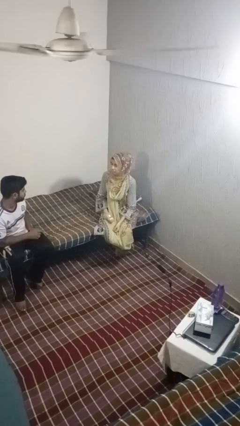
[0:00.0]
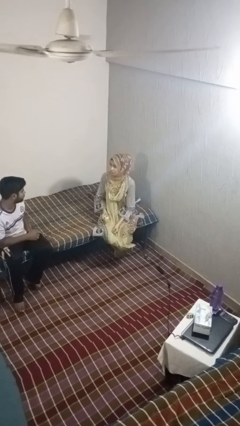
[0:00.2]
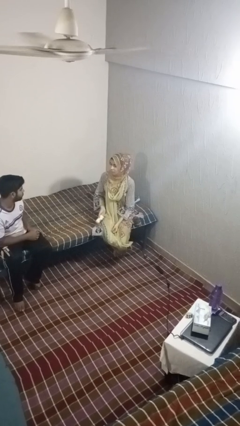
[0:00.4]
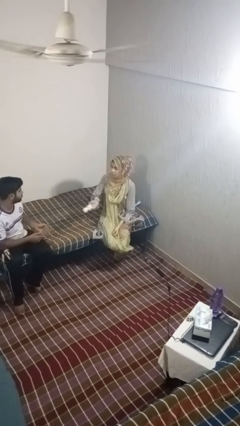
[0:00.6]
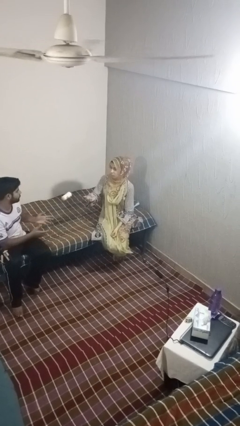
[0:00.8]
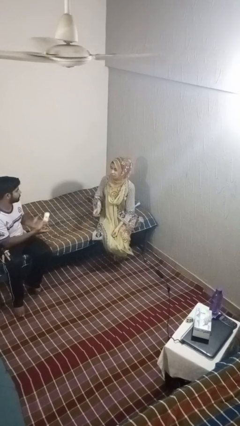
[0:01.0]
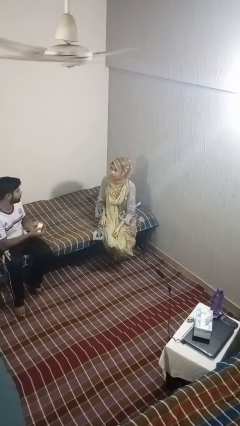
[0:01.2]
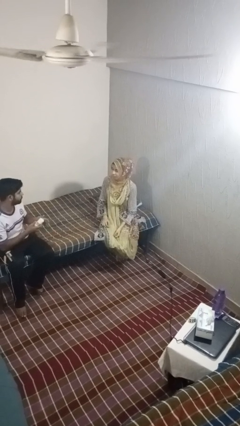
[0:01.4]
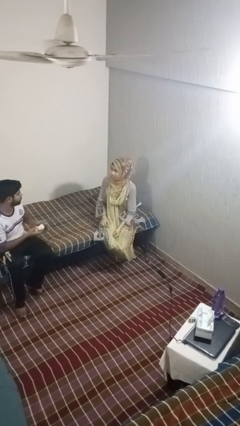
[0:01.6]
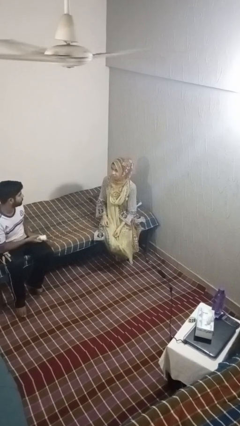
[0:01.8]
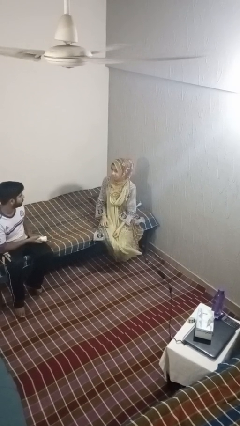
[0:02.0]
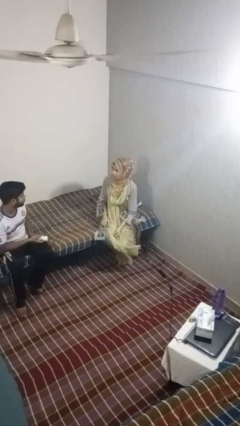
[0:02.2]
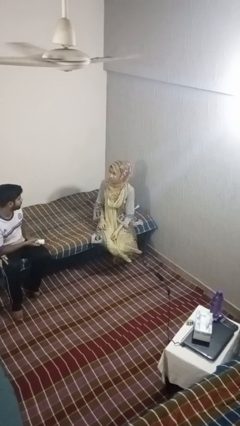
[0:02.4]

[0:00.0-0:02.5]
person throws object to person

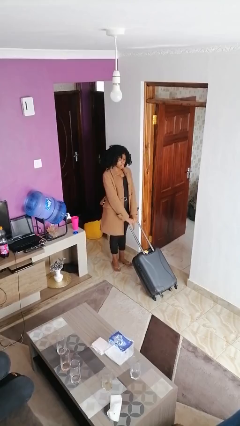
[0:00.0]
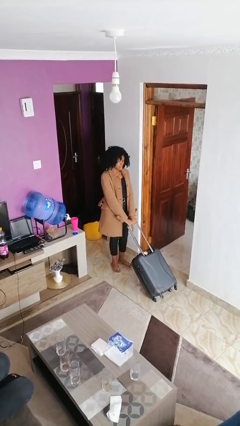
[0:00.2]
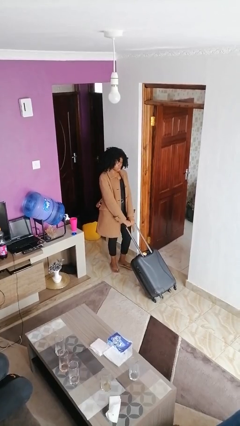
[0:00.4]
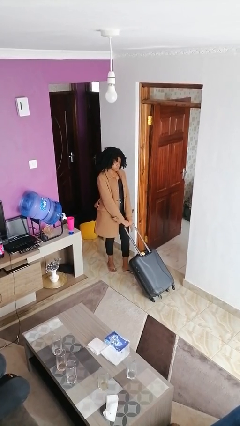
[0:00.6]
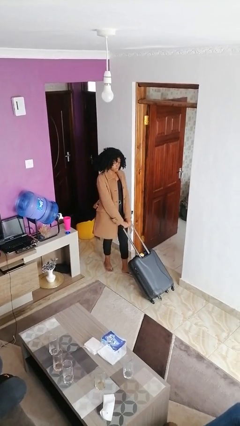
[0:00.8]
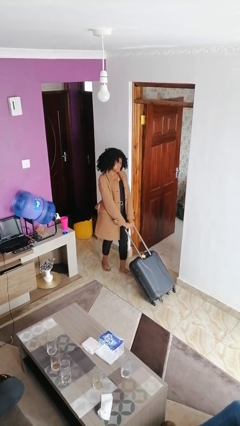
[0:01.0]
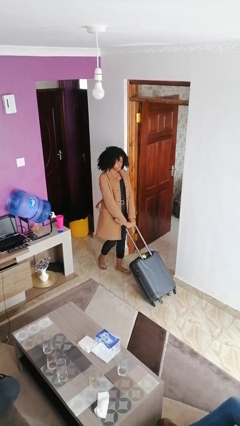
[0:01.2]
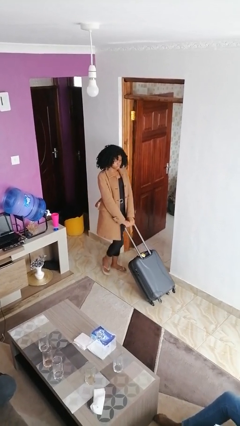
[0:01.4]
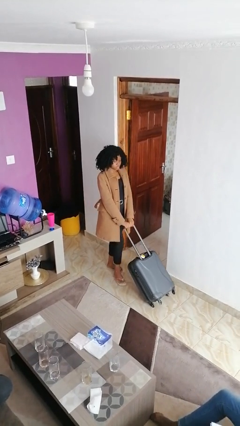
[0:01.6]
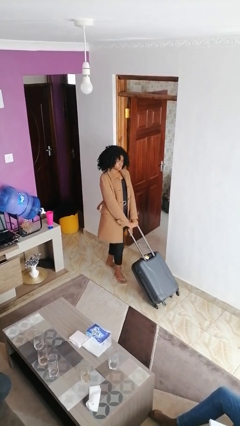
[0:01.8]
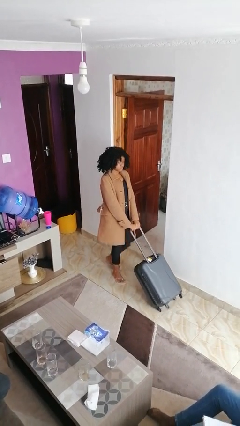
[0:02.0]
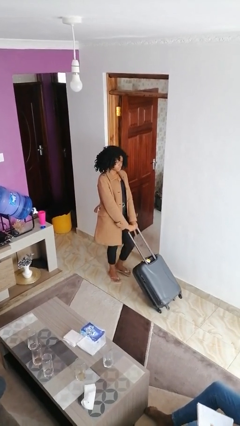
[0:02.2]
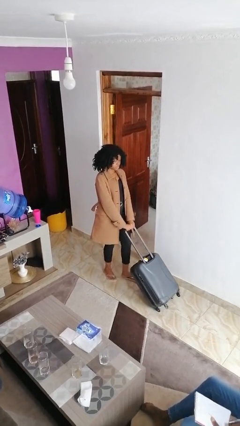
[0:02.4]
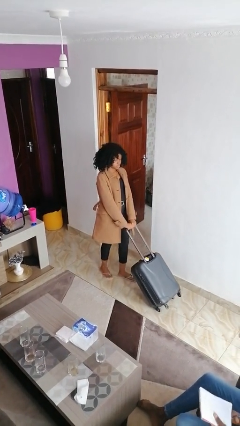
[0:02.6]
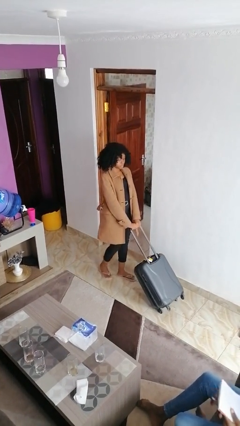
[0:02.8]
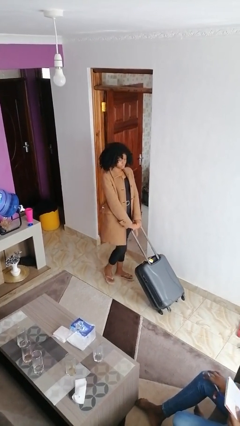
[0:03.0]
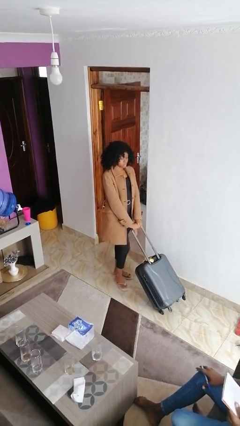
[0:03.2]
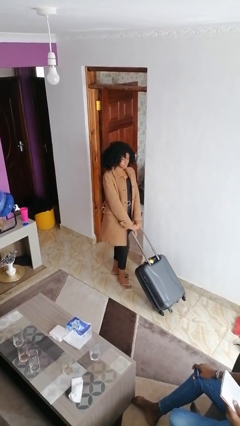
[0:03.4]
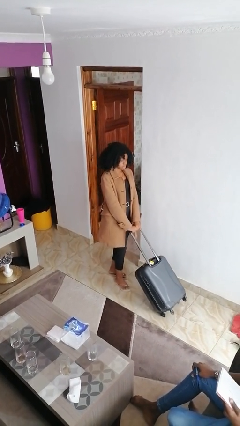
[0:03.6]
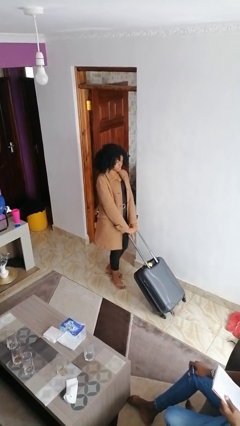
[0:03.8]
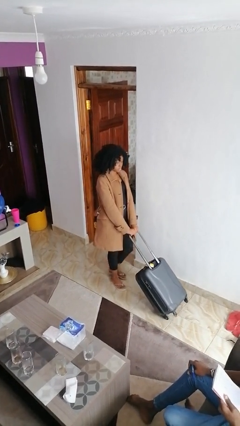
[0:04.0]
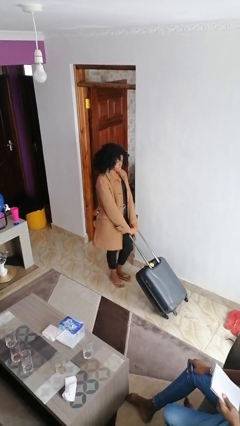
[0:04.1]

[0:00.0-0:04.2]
person pushes wheeled cart

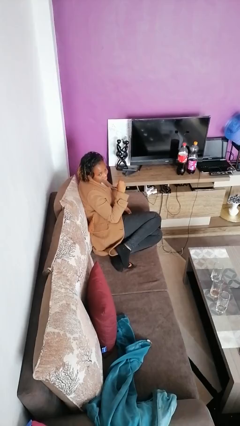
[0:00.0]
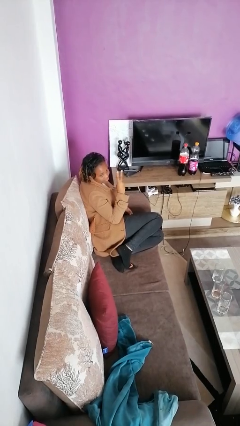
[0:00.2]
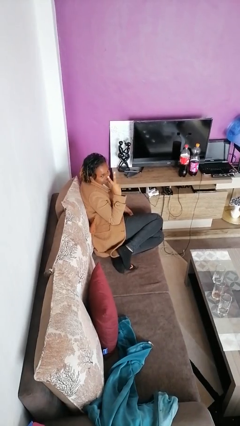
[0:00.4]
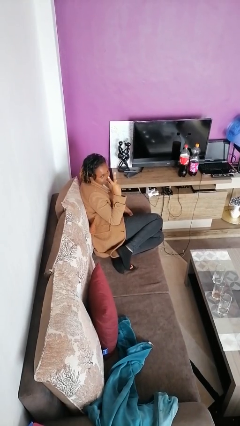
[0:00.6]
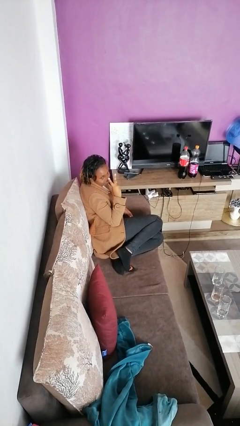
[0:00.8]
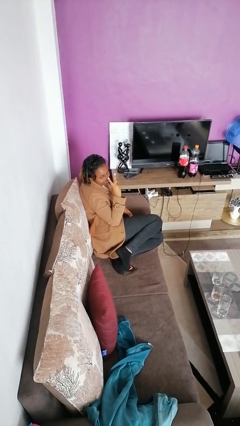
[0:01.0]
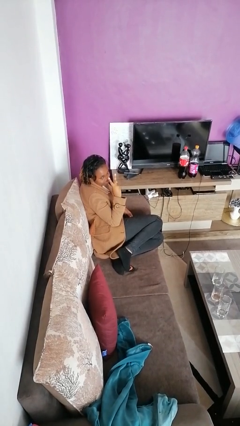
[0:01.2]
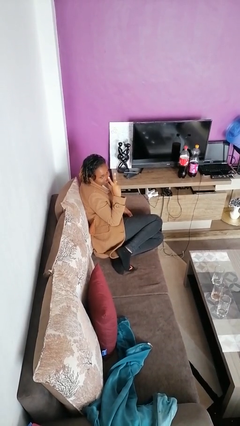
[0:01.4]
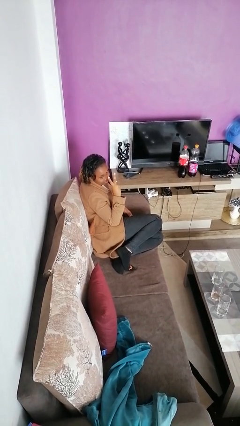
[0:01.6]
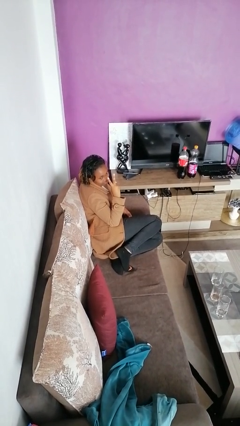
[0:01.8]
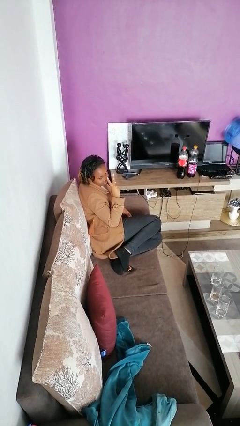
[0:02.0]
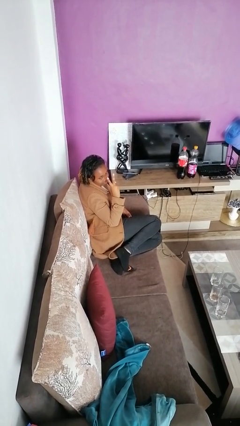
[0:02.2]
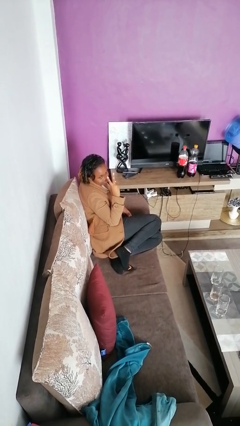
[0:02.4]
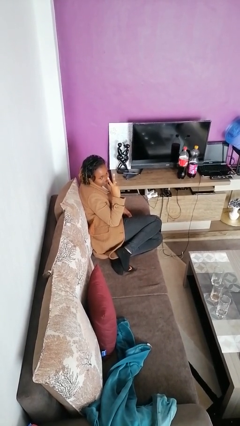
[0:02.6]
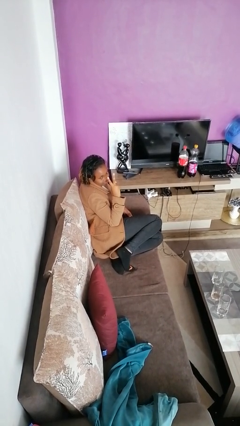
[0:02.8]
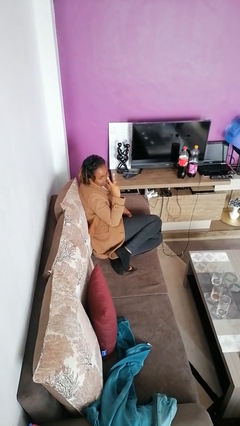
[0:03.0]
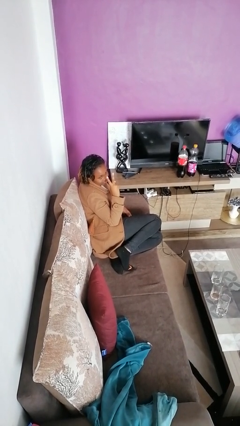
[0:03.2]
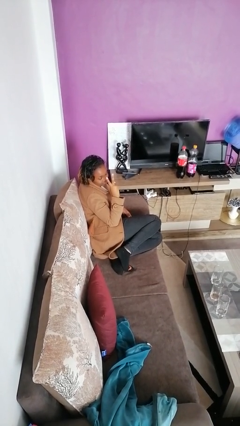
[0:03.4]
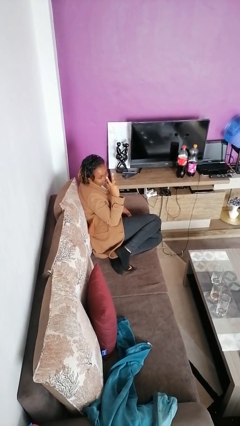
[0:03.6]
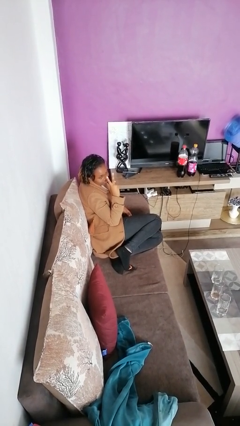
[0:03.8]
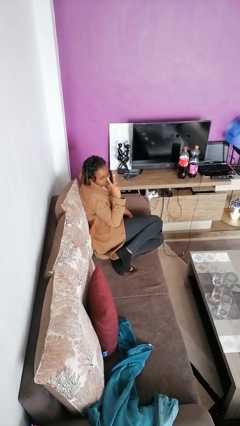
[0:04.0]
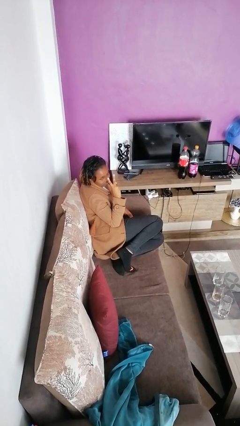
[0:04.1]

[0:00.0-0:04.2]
person gestures peace

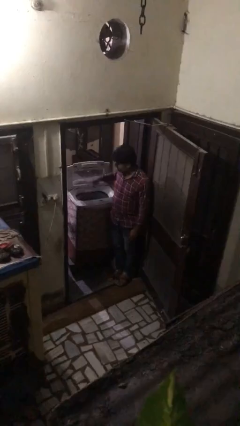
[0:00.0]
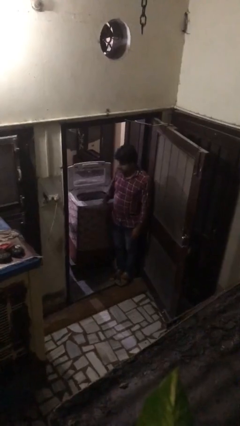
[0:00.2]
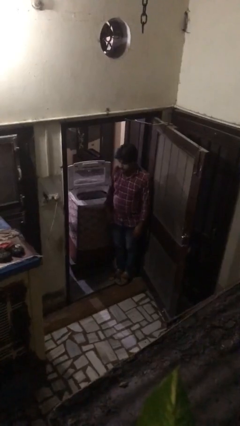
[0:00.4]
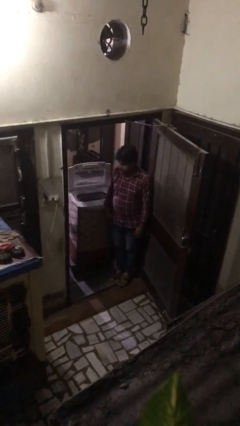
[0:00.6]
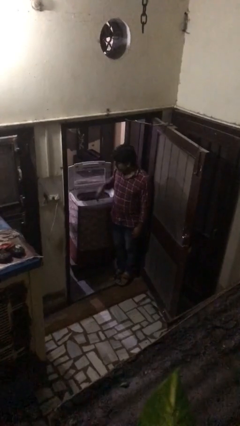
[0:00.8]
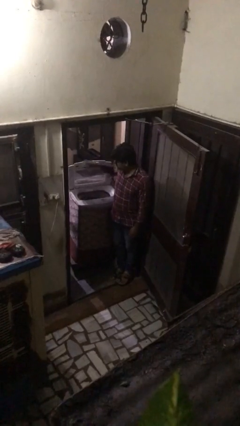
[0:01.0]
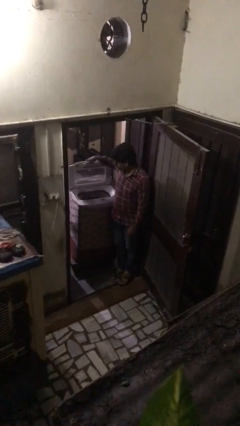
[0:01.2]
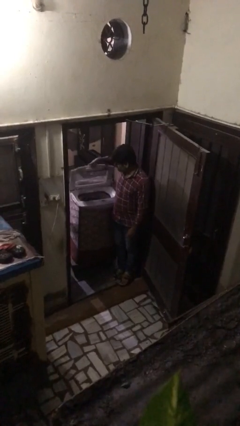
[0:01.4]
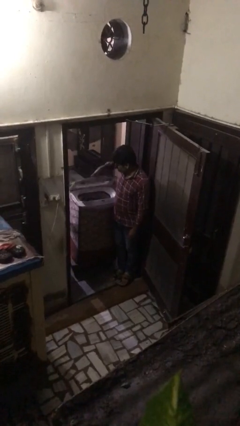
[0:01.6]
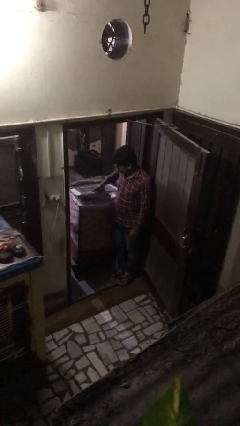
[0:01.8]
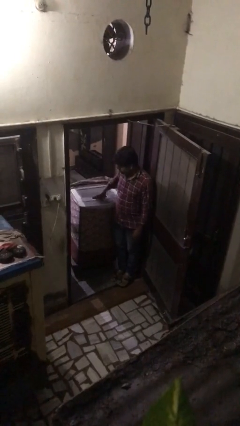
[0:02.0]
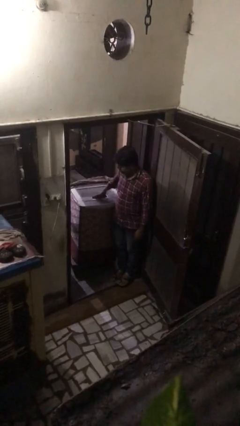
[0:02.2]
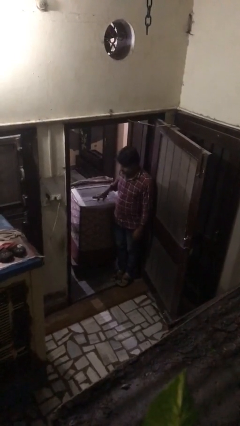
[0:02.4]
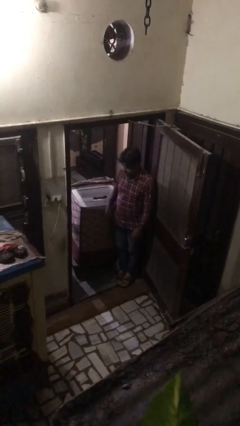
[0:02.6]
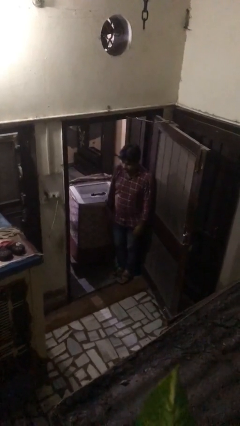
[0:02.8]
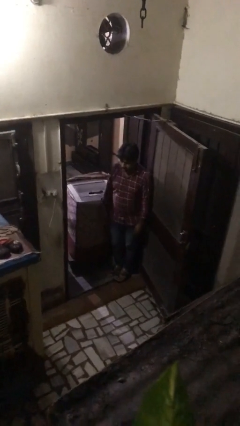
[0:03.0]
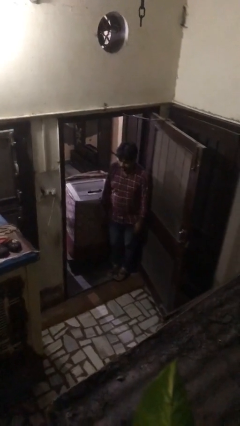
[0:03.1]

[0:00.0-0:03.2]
person closes clothes washer

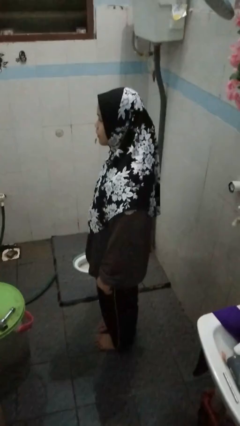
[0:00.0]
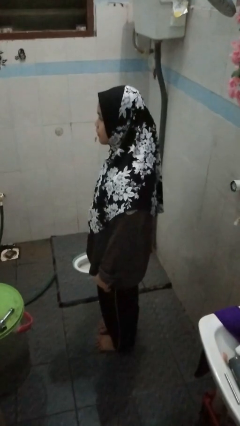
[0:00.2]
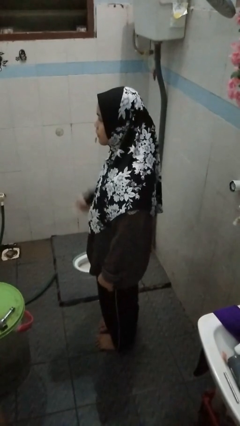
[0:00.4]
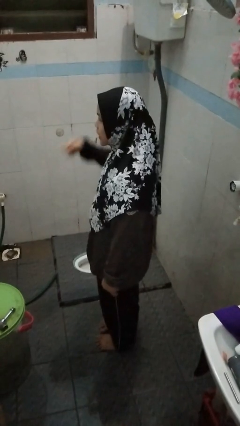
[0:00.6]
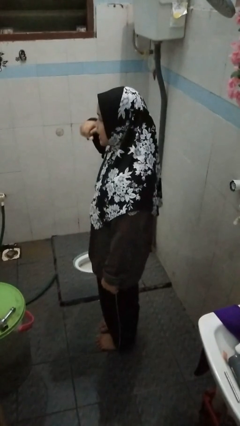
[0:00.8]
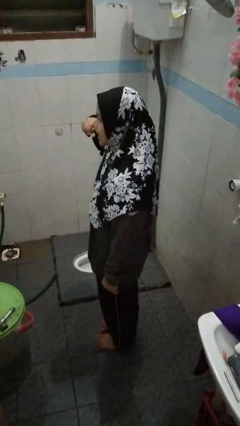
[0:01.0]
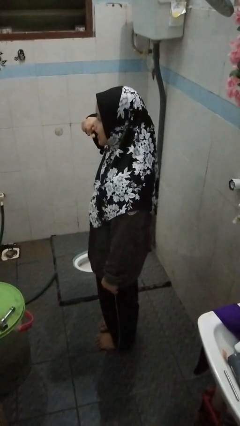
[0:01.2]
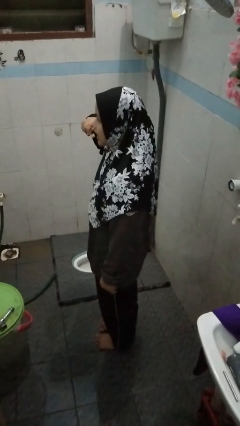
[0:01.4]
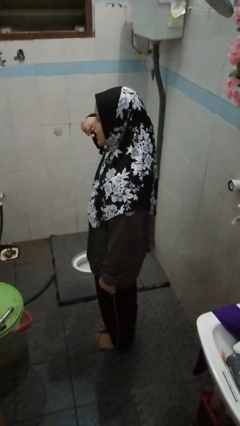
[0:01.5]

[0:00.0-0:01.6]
person brushes teeth

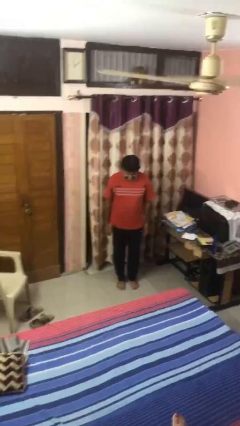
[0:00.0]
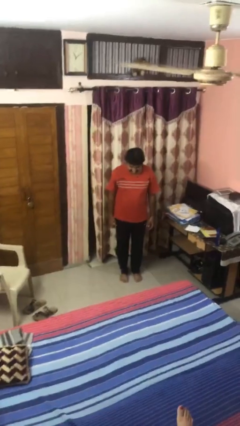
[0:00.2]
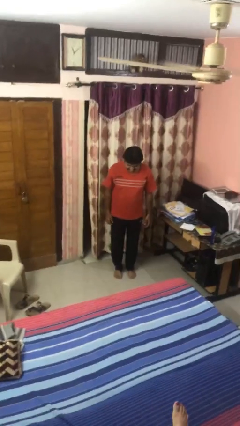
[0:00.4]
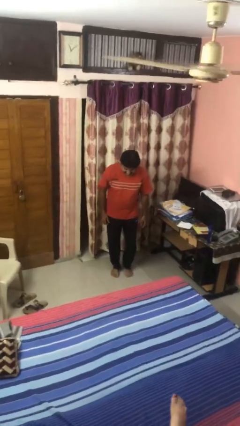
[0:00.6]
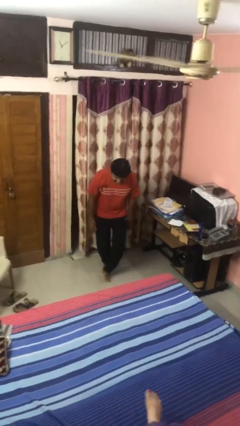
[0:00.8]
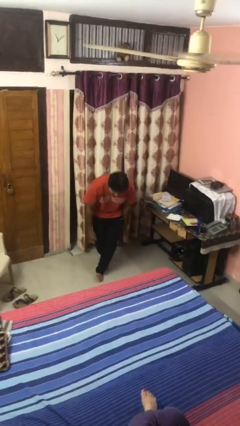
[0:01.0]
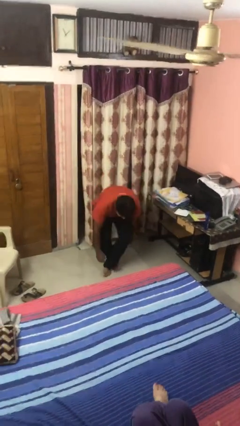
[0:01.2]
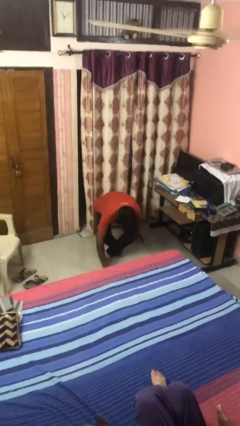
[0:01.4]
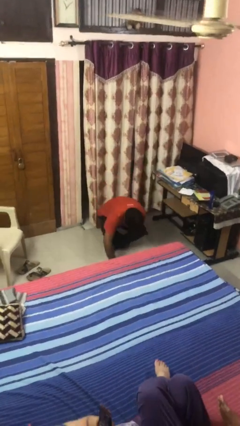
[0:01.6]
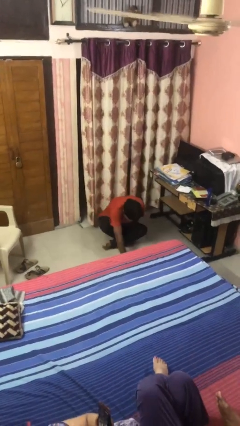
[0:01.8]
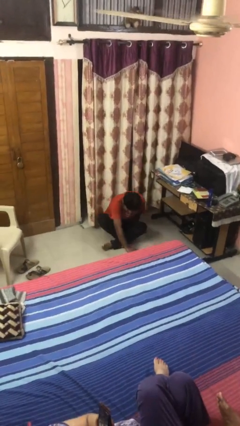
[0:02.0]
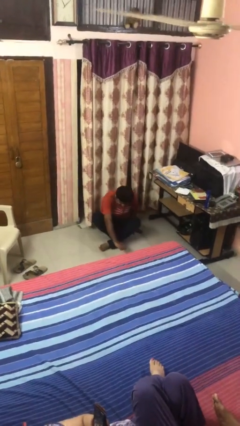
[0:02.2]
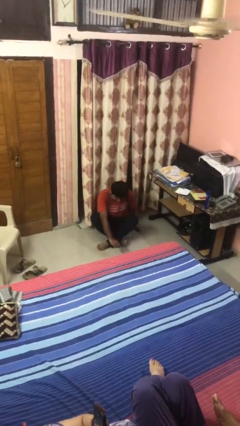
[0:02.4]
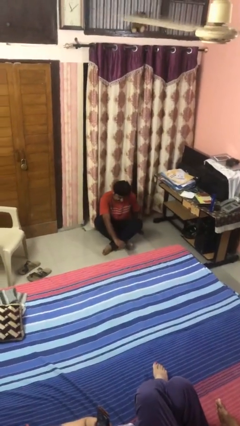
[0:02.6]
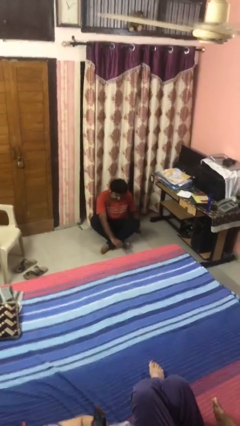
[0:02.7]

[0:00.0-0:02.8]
person sits crisscross
